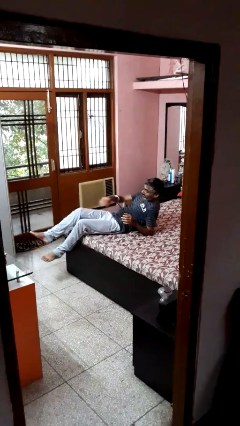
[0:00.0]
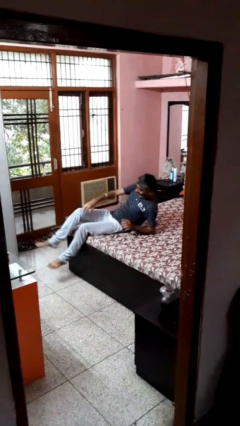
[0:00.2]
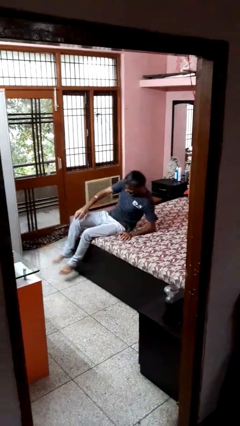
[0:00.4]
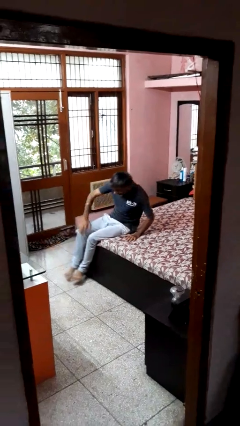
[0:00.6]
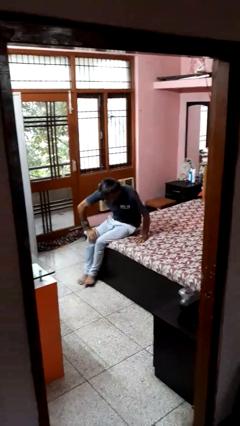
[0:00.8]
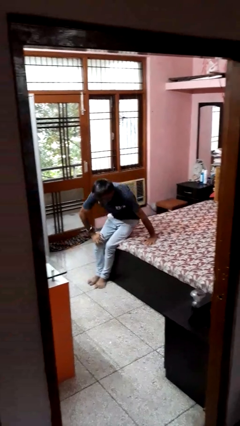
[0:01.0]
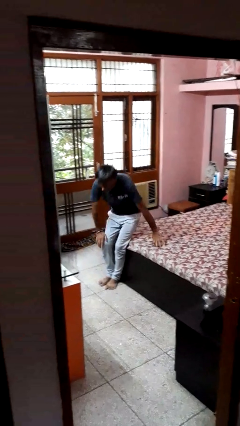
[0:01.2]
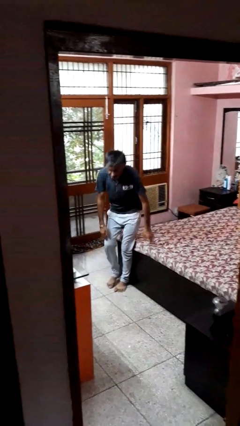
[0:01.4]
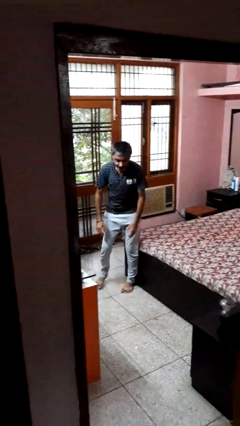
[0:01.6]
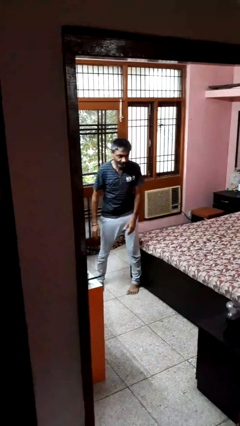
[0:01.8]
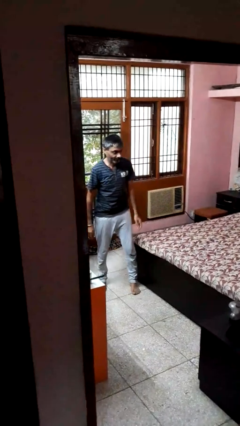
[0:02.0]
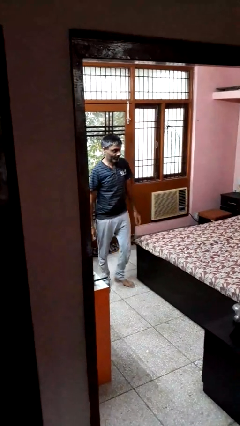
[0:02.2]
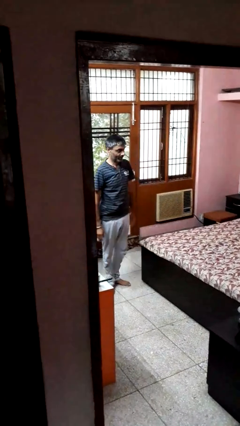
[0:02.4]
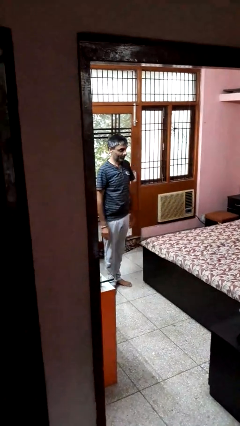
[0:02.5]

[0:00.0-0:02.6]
person stands up

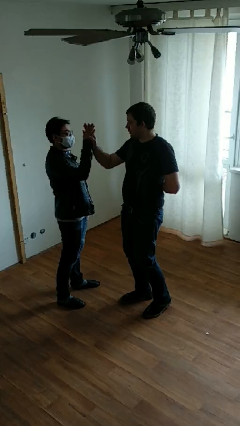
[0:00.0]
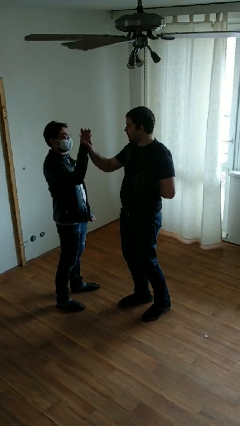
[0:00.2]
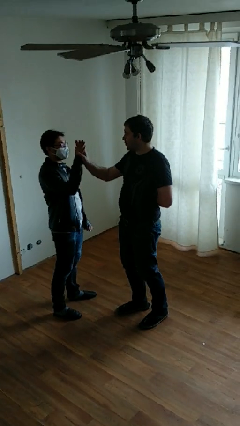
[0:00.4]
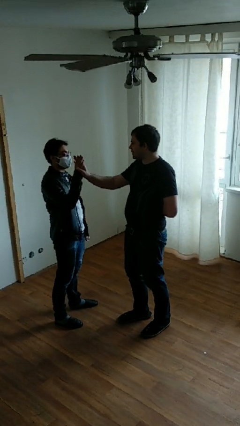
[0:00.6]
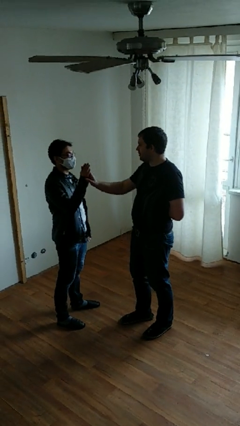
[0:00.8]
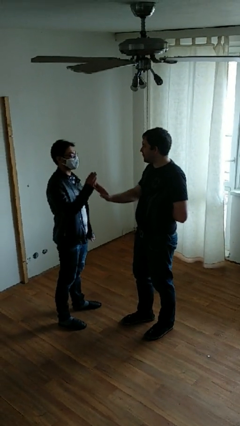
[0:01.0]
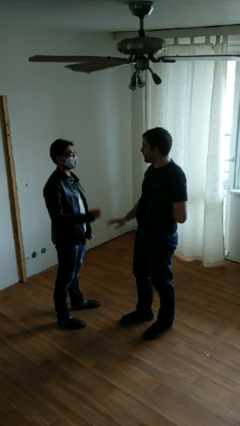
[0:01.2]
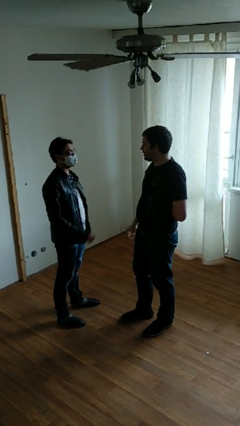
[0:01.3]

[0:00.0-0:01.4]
person highfives hand

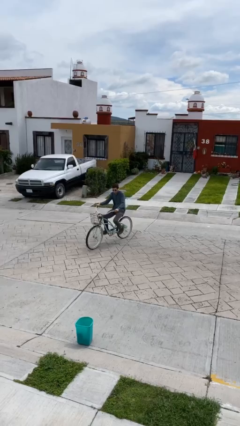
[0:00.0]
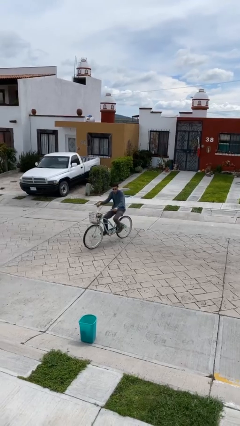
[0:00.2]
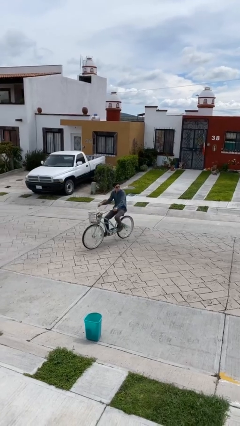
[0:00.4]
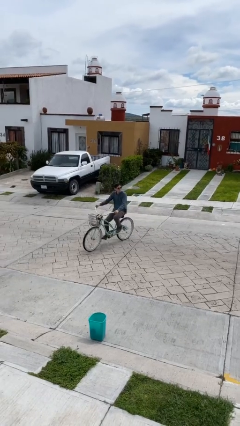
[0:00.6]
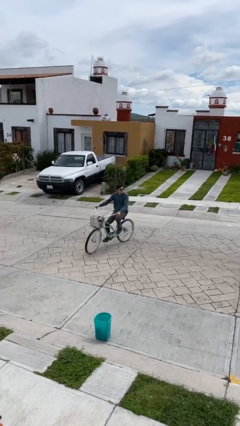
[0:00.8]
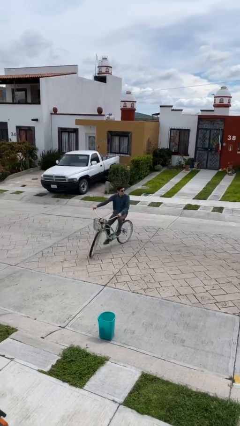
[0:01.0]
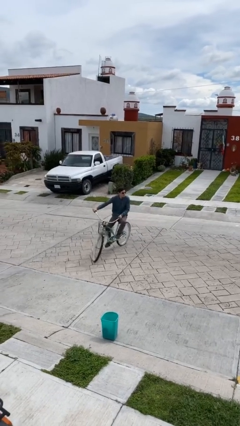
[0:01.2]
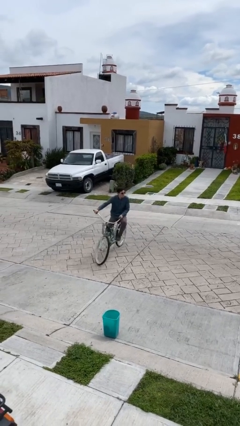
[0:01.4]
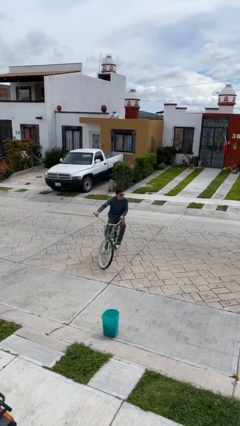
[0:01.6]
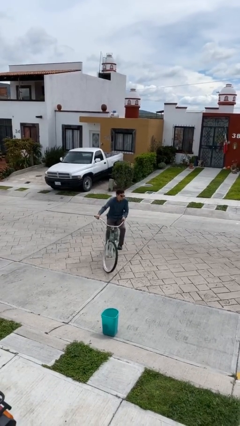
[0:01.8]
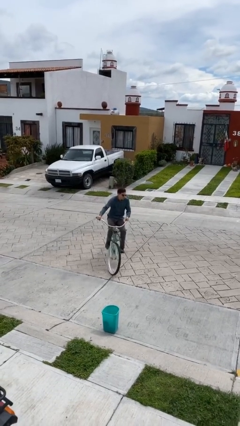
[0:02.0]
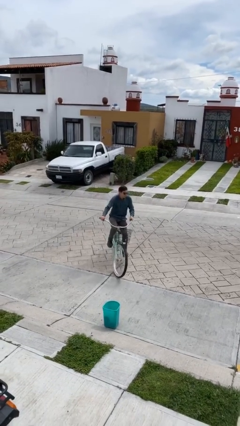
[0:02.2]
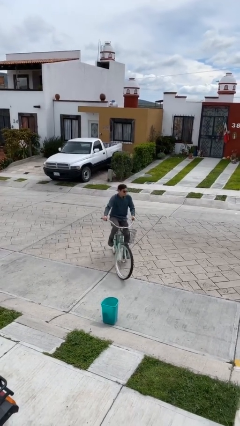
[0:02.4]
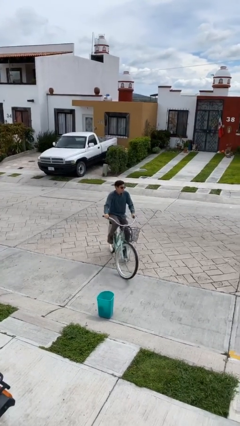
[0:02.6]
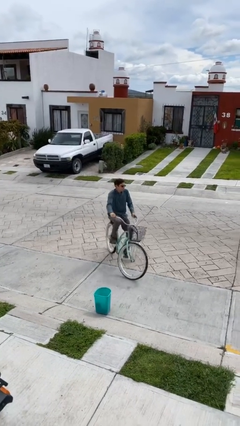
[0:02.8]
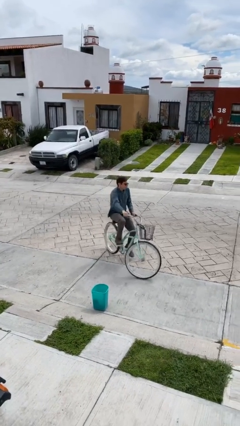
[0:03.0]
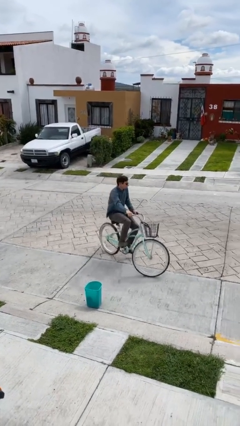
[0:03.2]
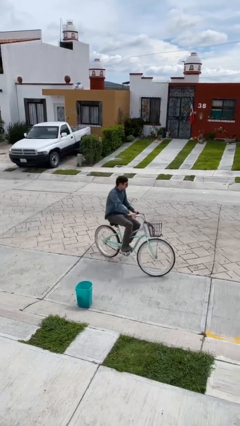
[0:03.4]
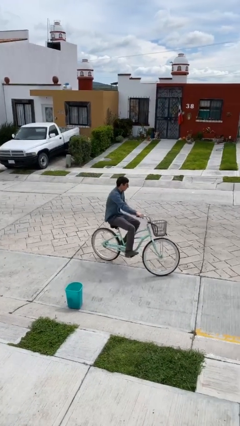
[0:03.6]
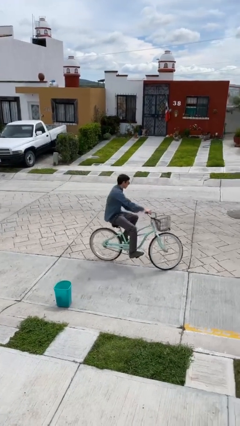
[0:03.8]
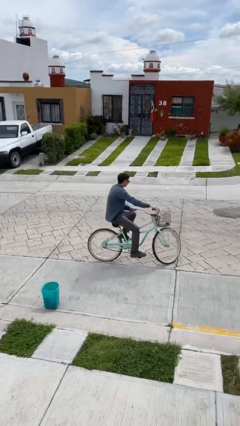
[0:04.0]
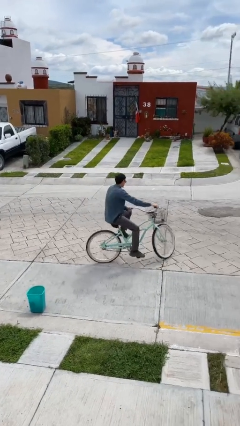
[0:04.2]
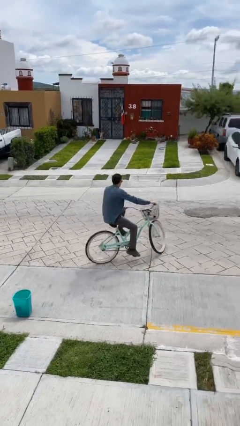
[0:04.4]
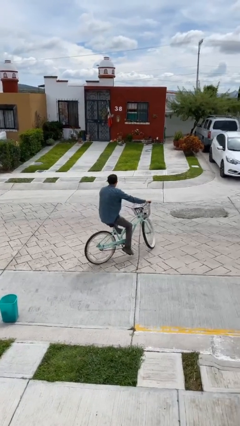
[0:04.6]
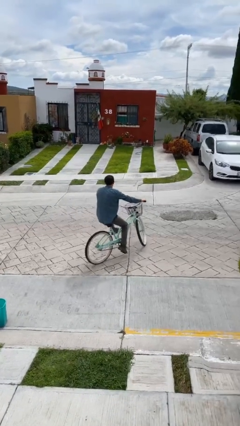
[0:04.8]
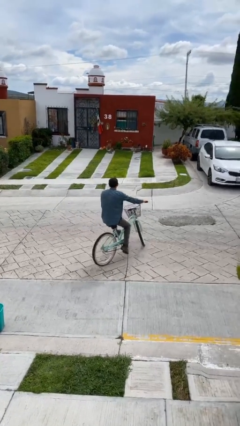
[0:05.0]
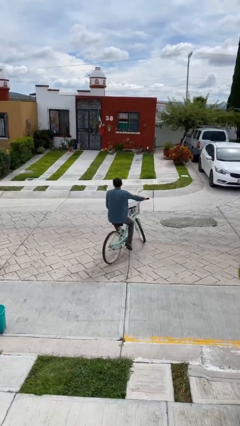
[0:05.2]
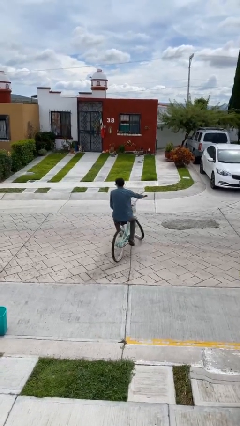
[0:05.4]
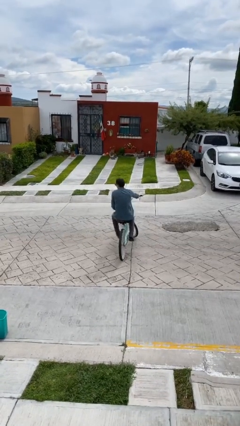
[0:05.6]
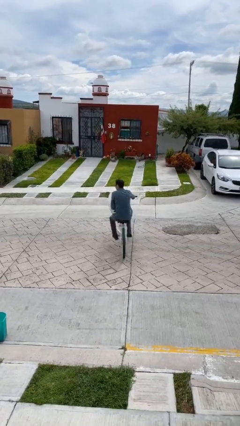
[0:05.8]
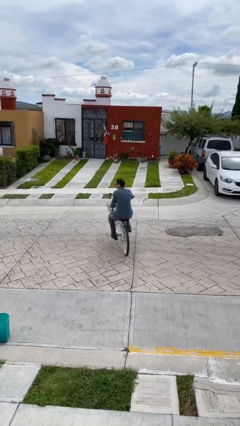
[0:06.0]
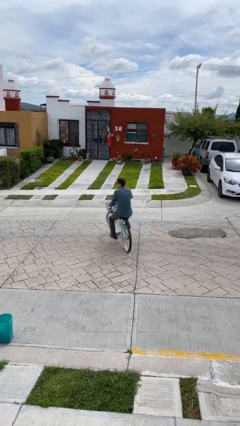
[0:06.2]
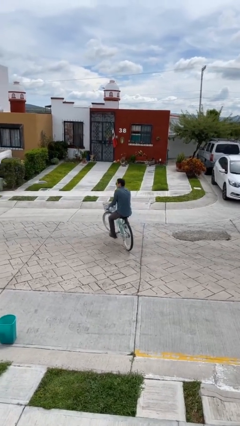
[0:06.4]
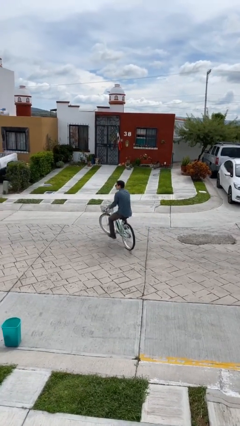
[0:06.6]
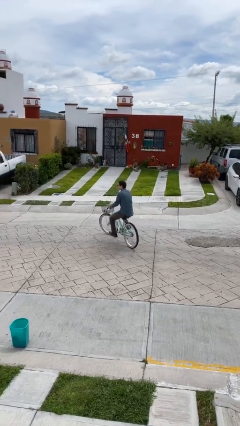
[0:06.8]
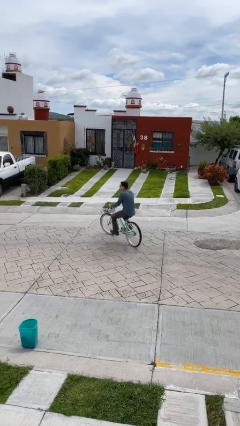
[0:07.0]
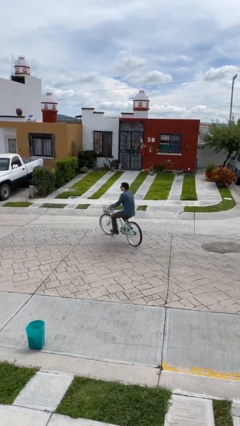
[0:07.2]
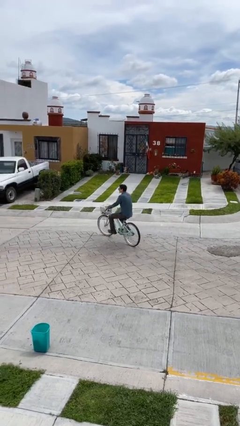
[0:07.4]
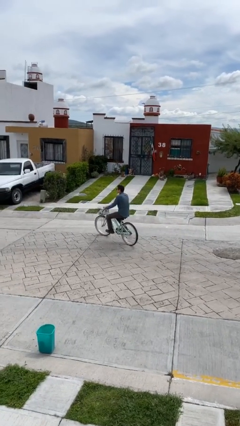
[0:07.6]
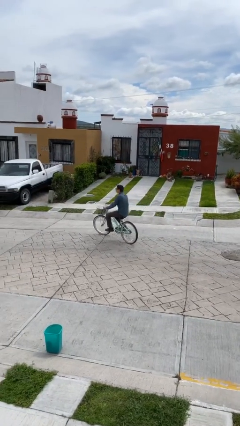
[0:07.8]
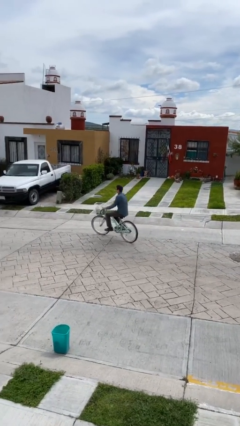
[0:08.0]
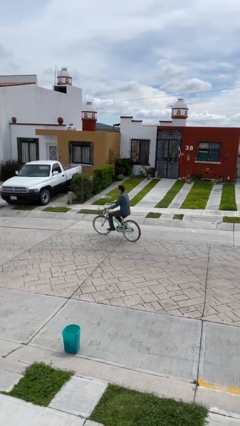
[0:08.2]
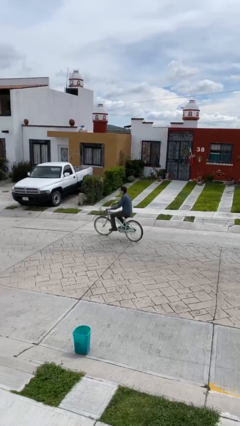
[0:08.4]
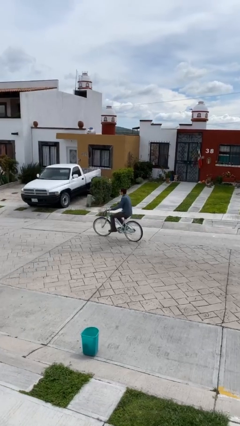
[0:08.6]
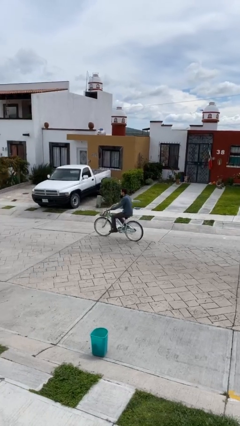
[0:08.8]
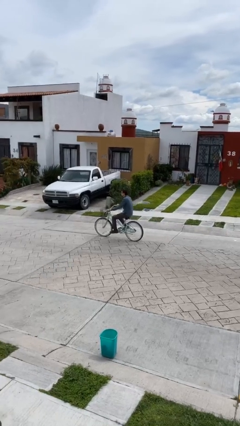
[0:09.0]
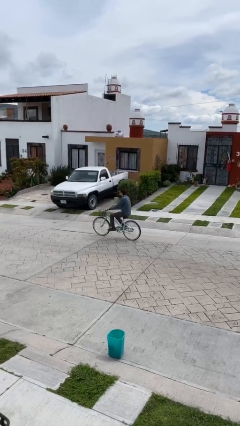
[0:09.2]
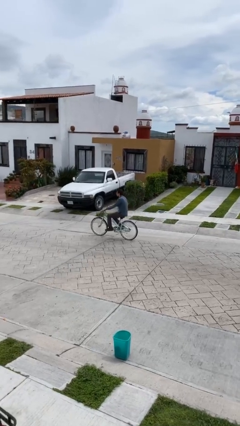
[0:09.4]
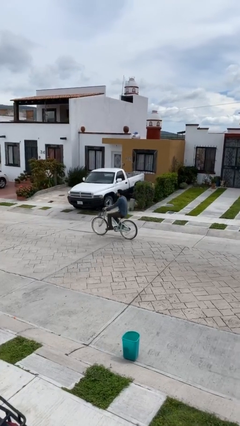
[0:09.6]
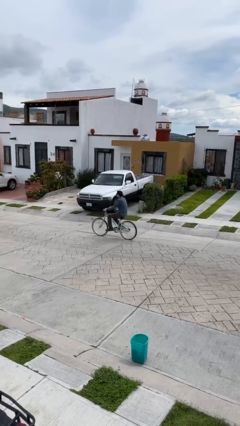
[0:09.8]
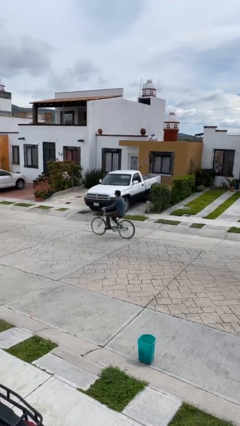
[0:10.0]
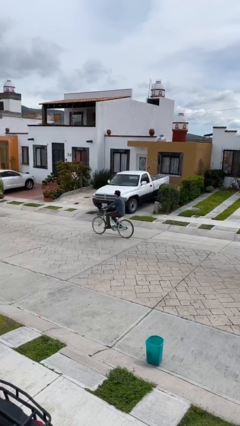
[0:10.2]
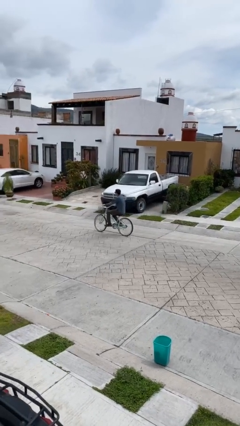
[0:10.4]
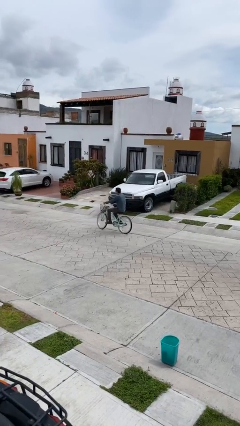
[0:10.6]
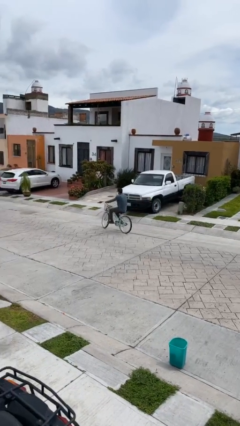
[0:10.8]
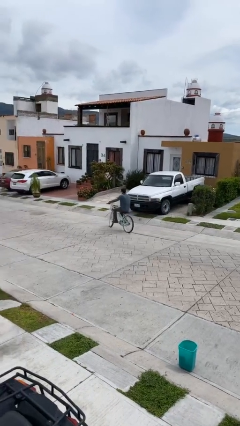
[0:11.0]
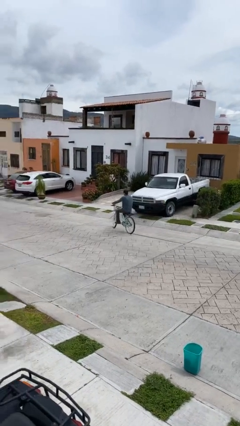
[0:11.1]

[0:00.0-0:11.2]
person rides bicycle

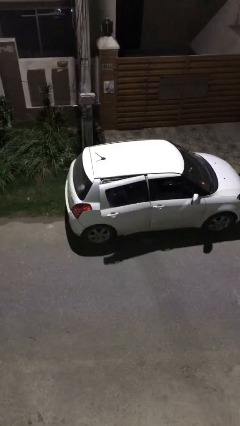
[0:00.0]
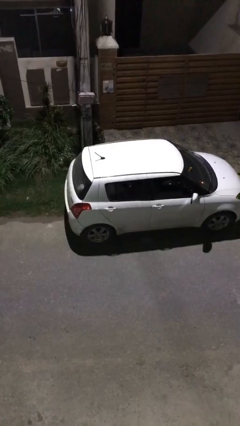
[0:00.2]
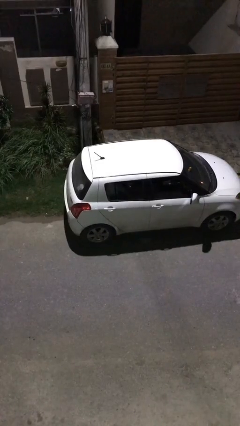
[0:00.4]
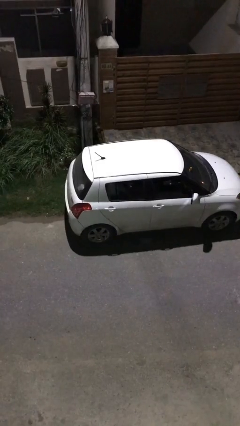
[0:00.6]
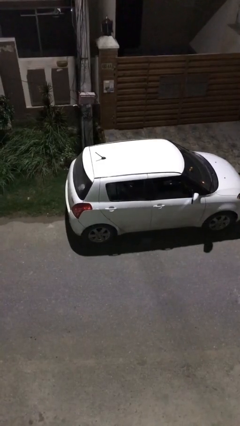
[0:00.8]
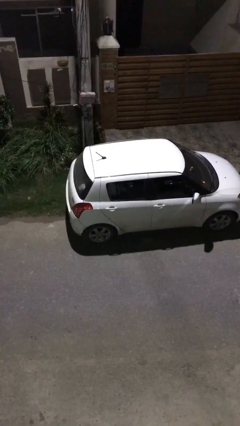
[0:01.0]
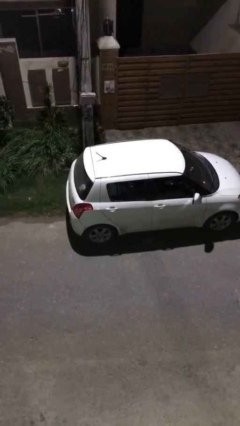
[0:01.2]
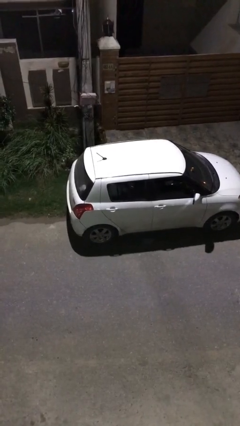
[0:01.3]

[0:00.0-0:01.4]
person closes car door

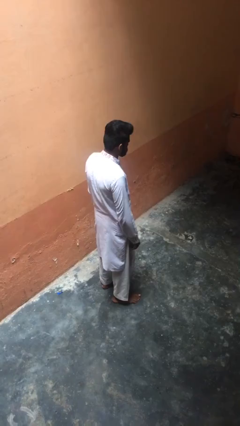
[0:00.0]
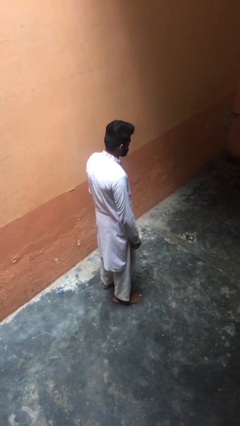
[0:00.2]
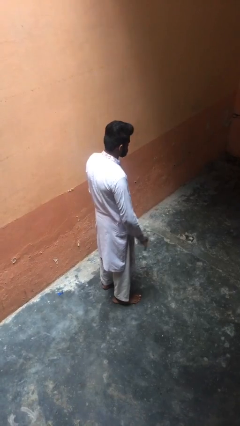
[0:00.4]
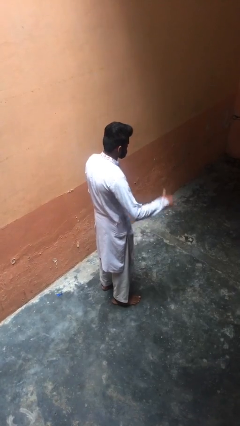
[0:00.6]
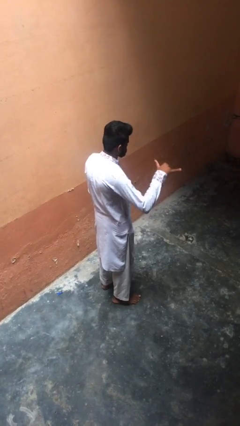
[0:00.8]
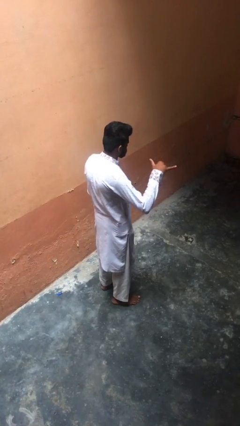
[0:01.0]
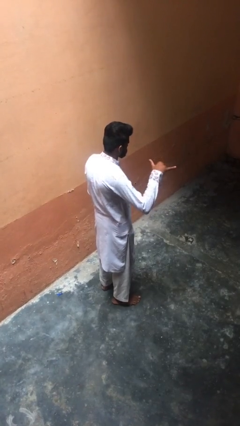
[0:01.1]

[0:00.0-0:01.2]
person gestures hang loose
